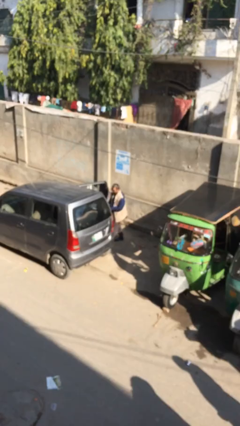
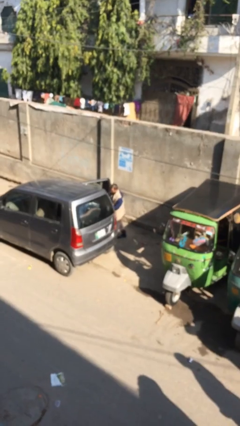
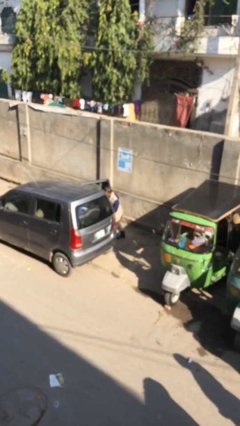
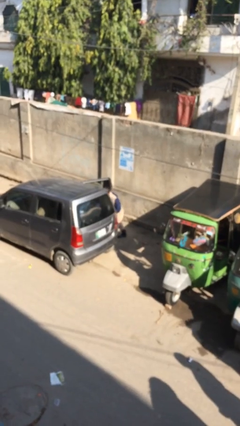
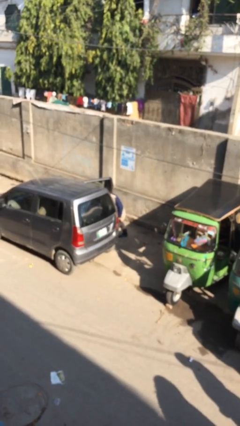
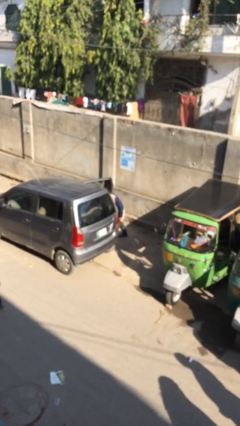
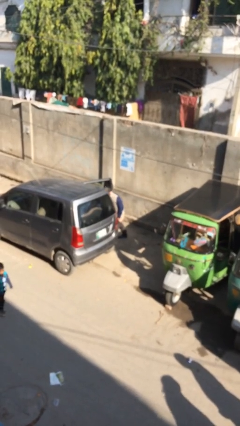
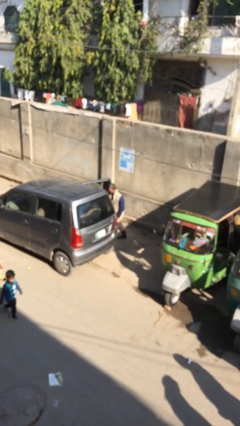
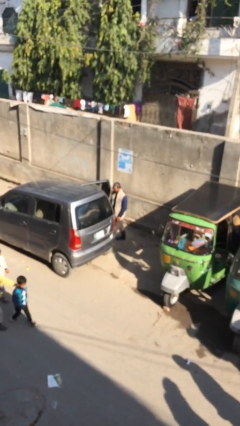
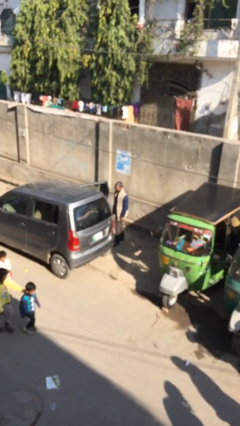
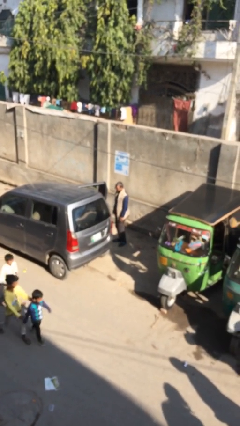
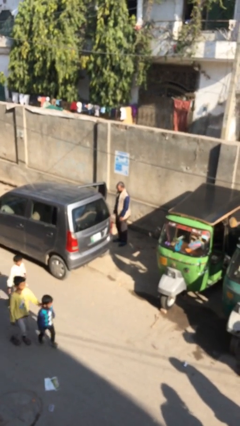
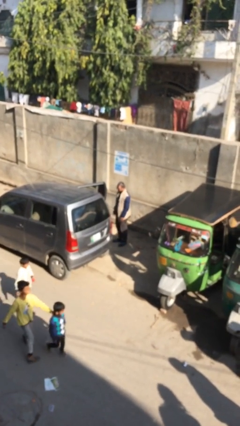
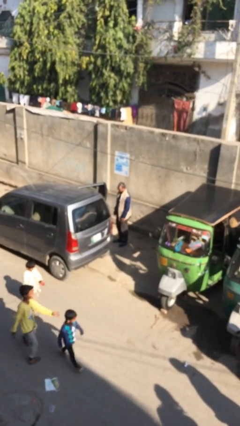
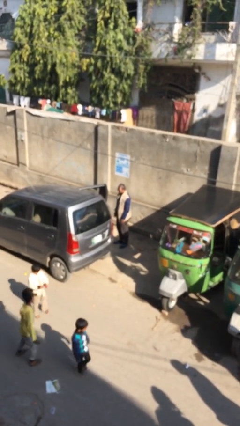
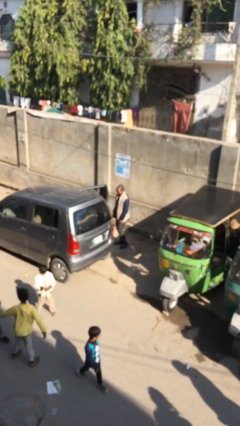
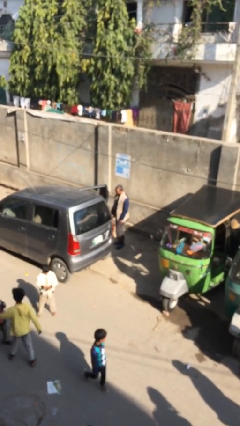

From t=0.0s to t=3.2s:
person loads car

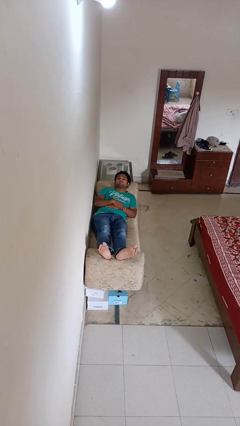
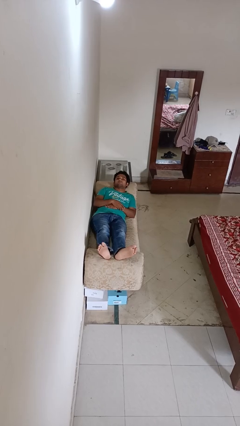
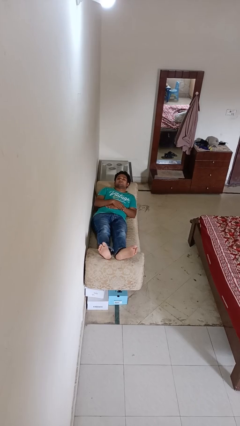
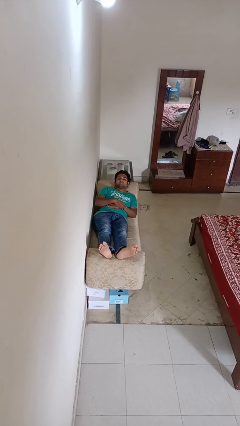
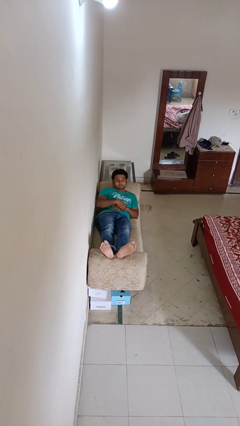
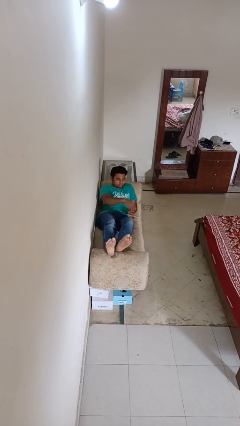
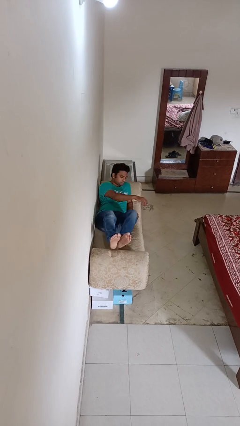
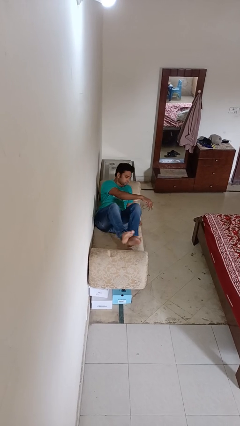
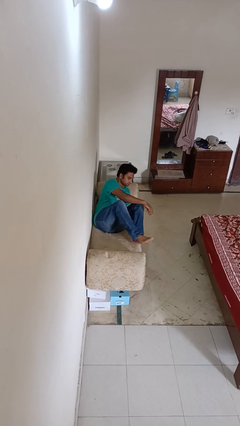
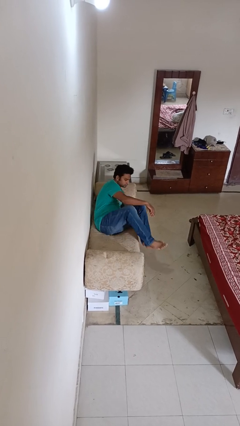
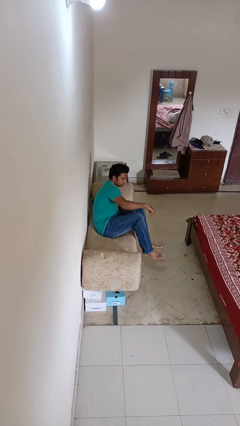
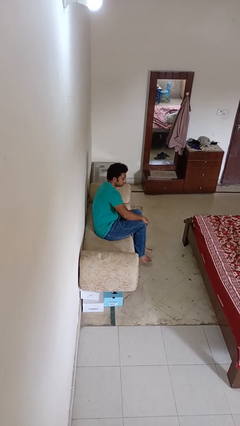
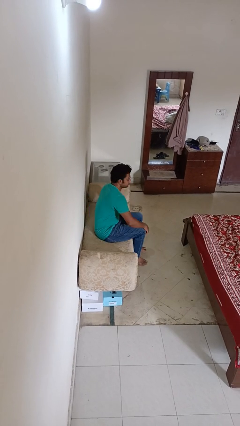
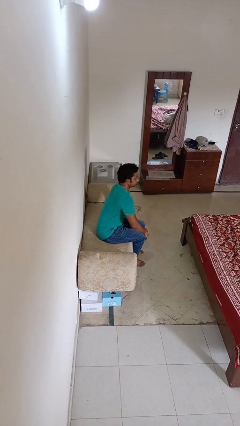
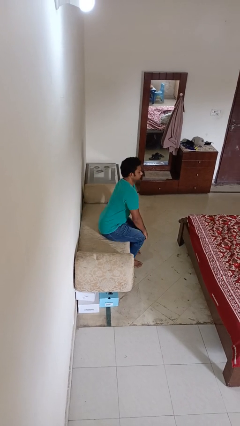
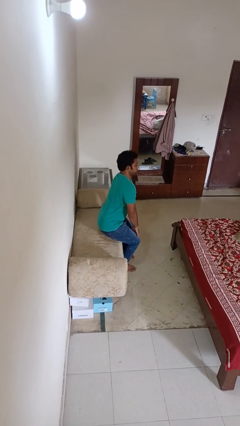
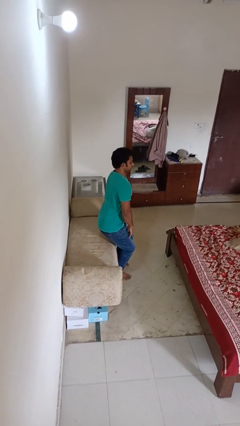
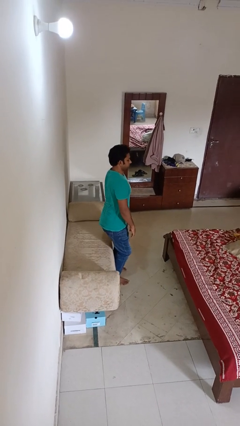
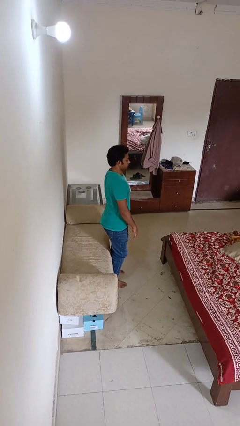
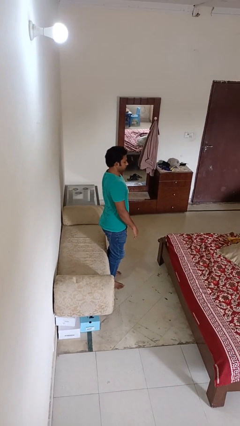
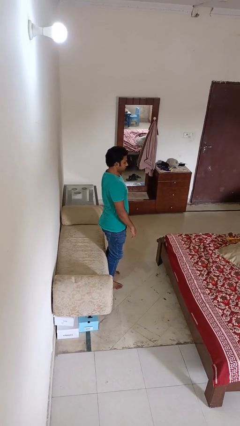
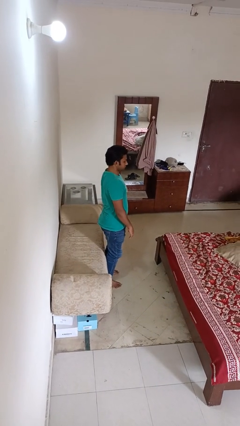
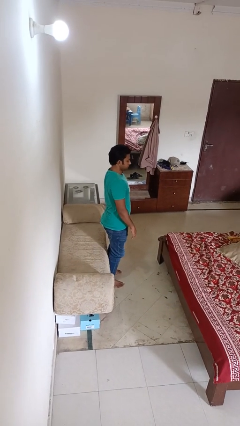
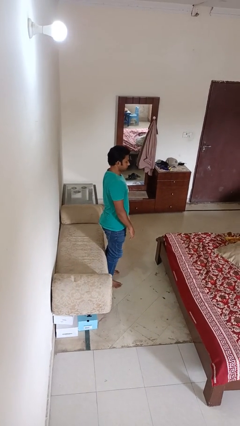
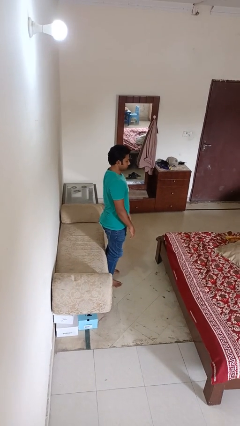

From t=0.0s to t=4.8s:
person stands up

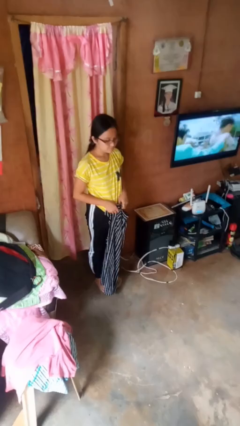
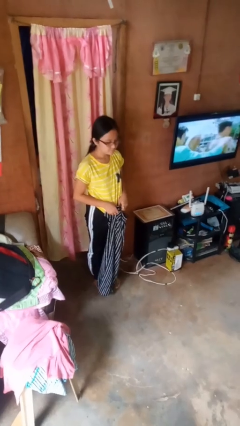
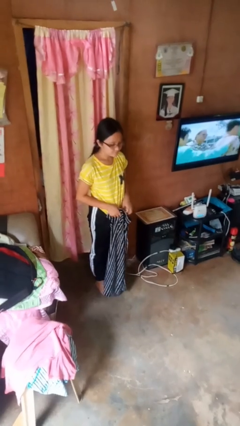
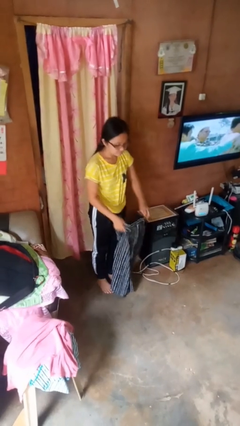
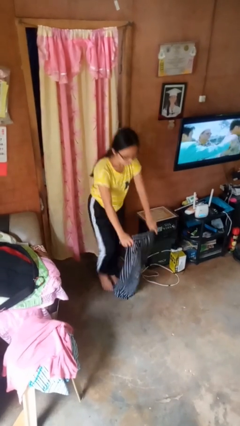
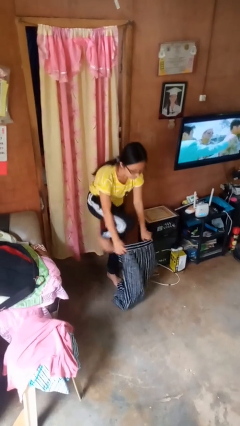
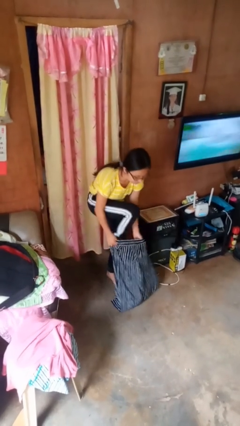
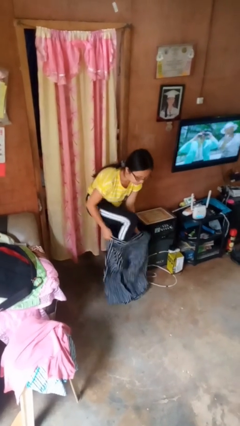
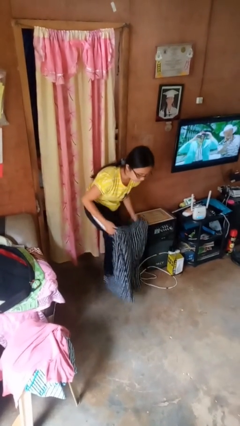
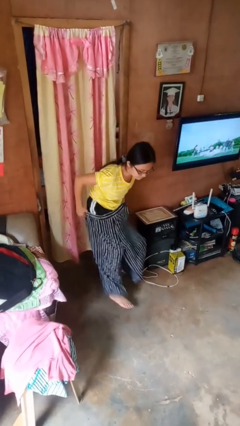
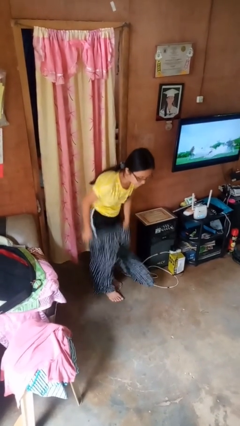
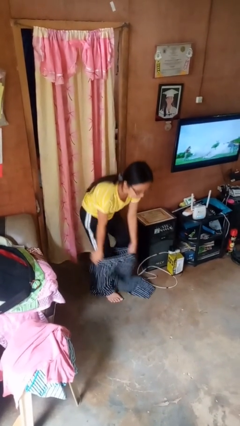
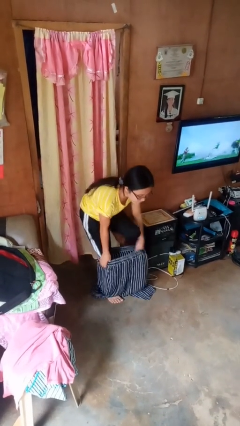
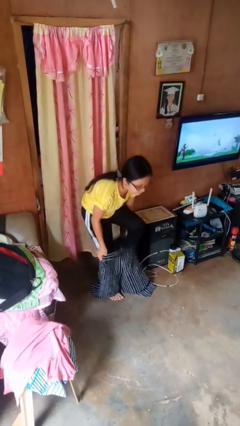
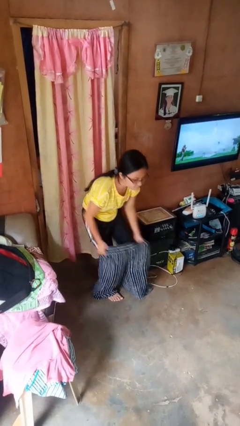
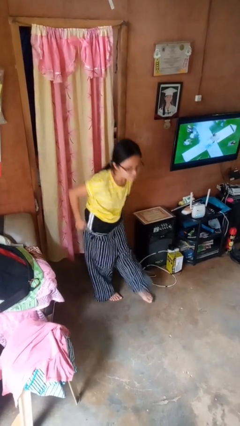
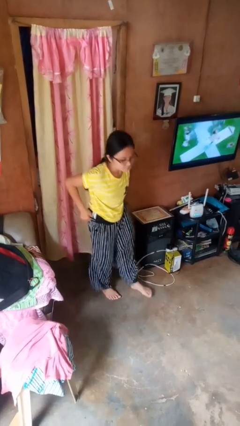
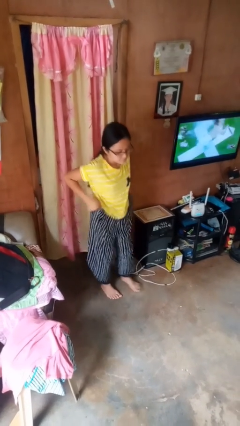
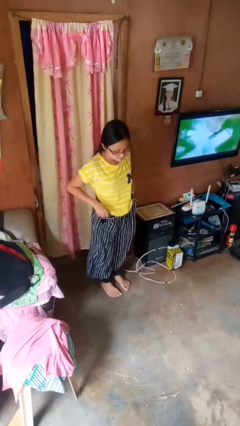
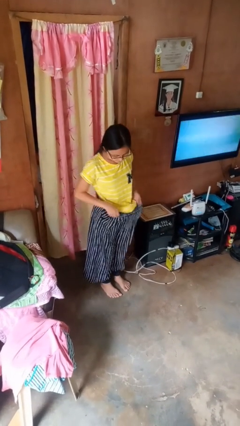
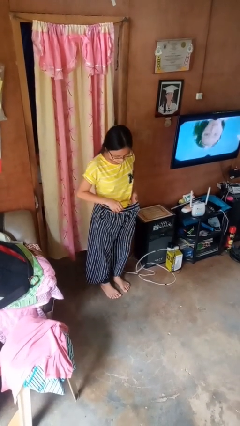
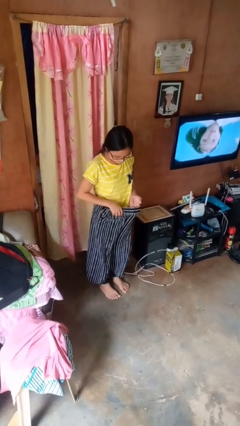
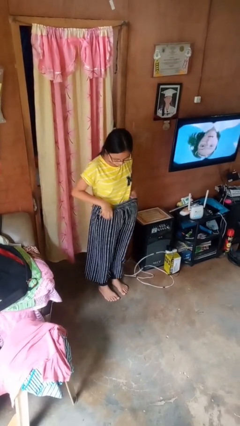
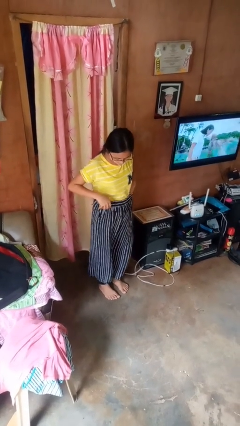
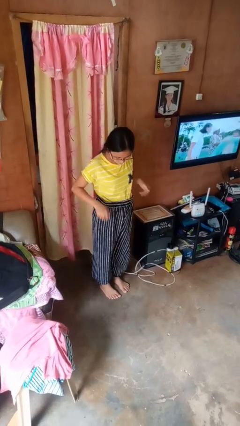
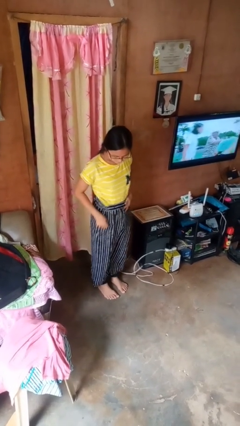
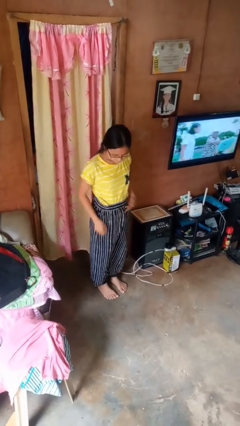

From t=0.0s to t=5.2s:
person puts on pants

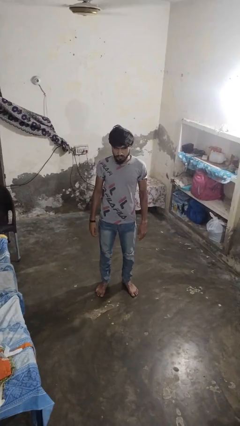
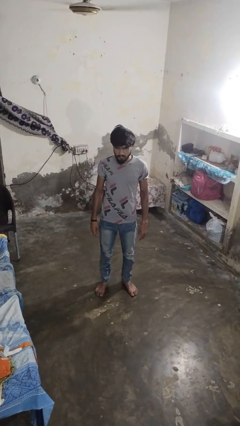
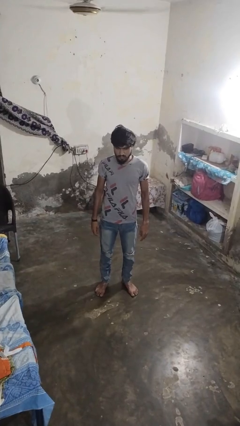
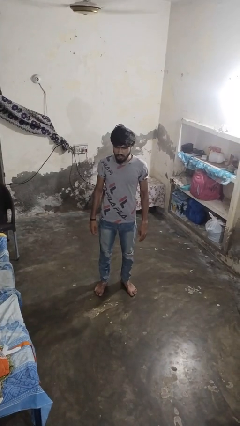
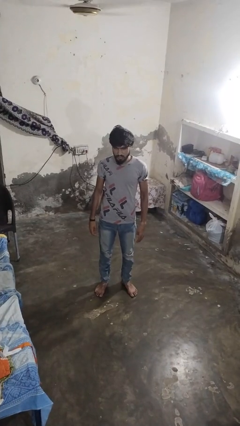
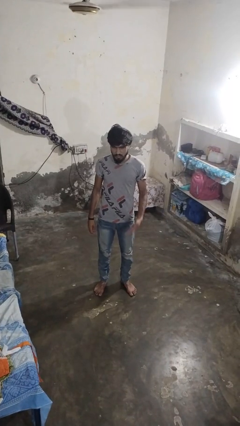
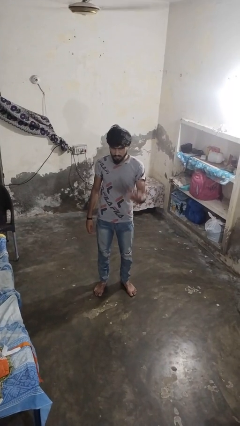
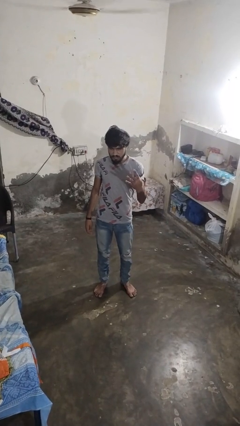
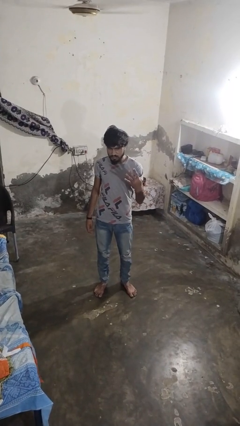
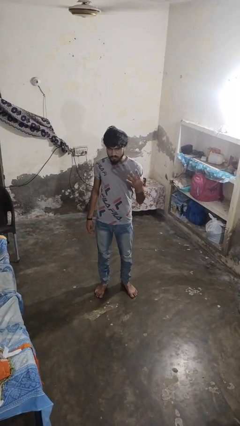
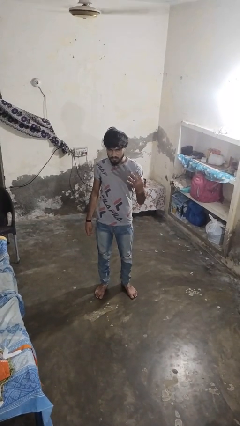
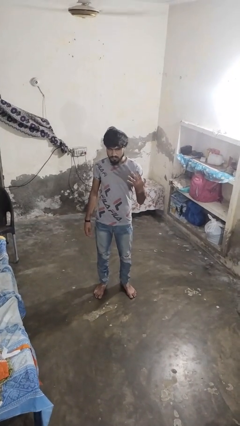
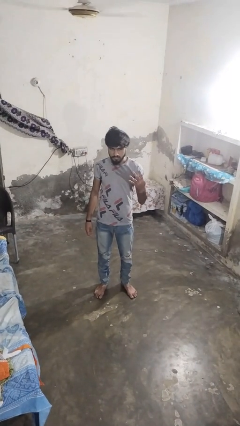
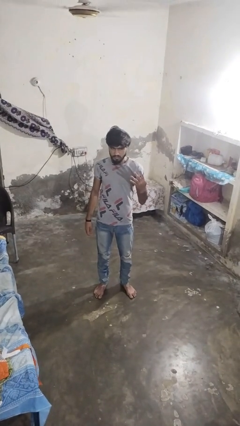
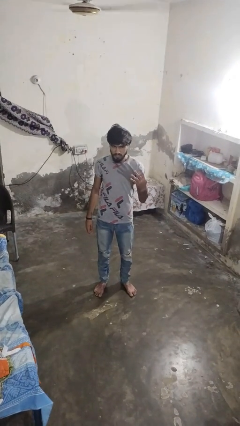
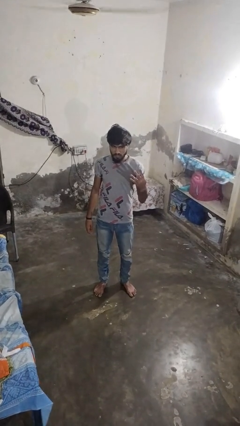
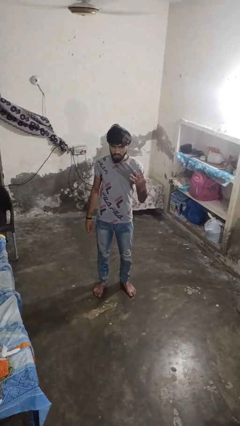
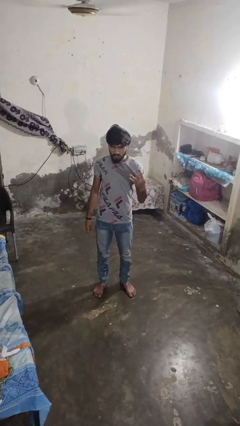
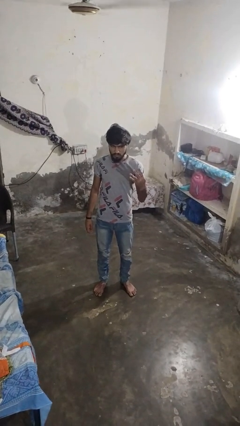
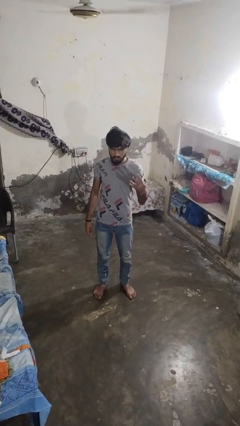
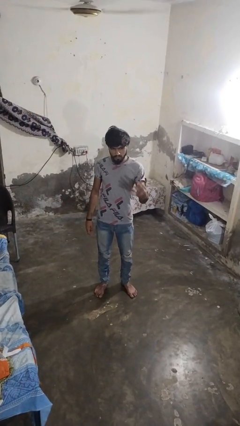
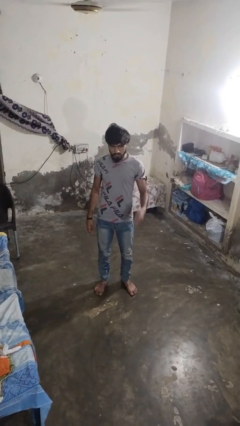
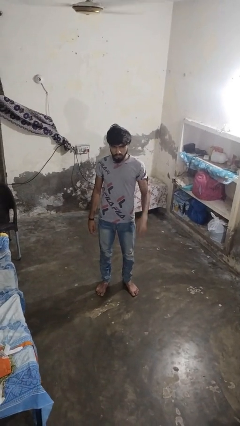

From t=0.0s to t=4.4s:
person gestures number four
